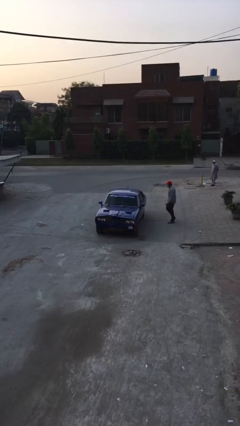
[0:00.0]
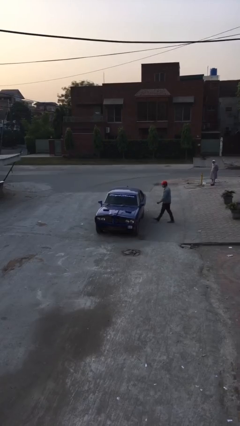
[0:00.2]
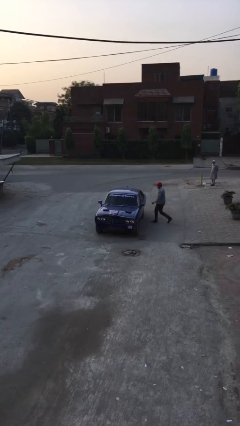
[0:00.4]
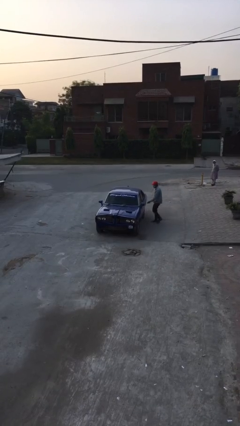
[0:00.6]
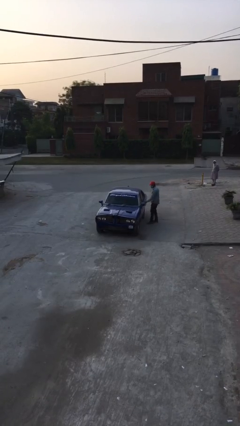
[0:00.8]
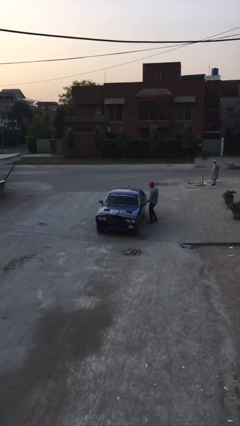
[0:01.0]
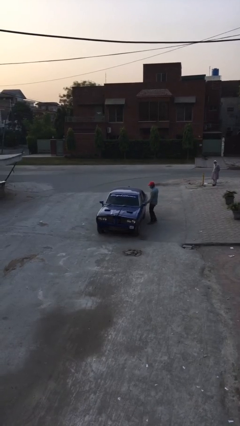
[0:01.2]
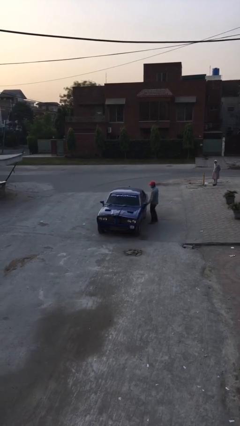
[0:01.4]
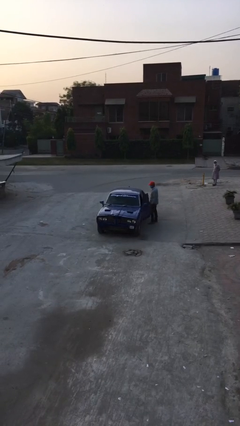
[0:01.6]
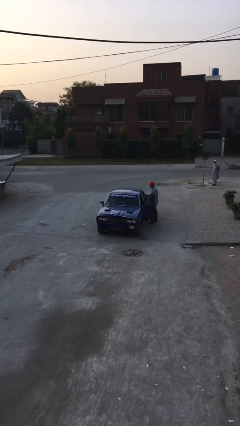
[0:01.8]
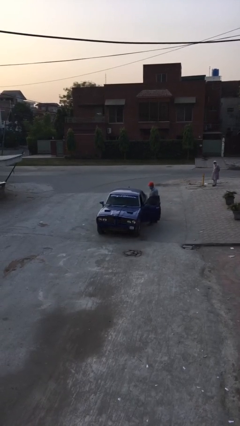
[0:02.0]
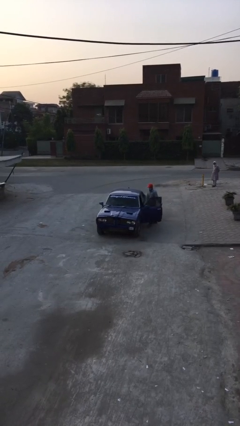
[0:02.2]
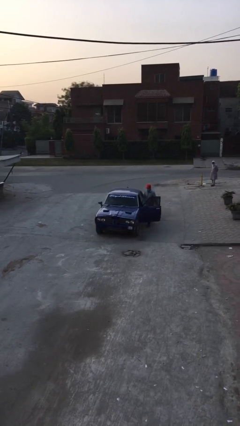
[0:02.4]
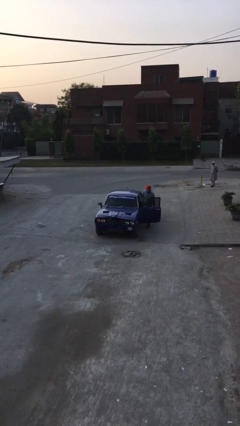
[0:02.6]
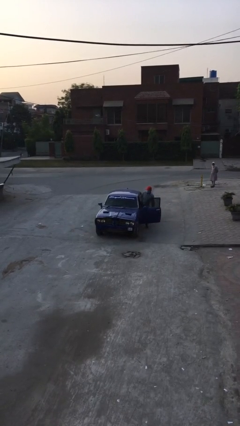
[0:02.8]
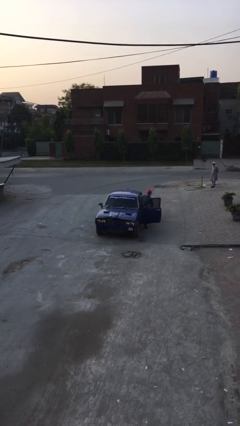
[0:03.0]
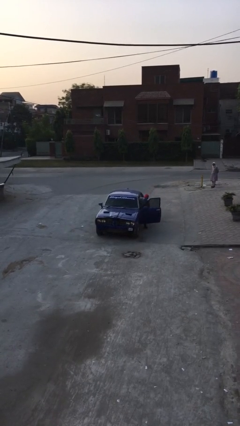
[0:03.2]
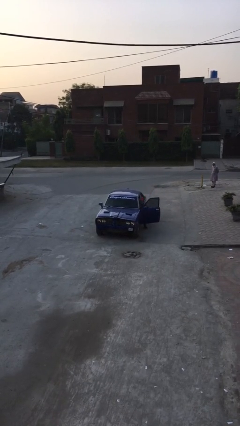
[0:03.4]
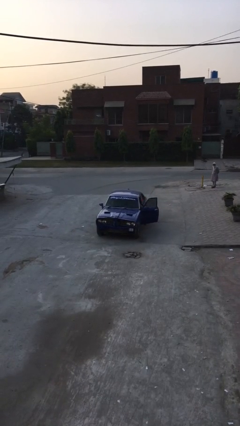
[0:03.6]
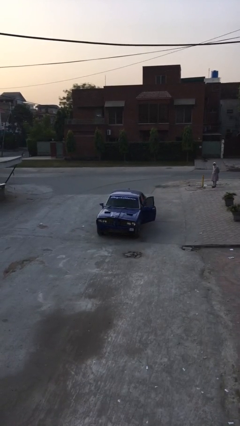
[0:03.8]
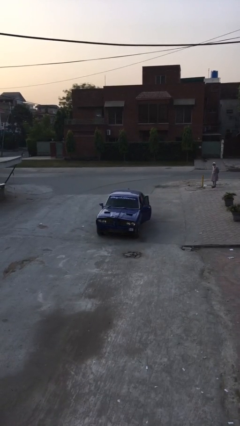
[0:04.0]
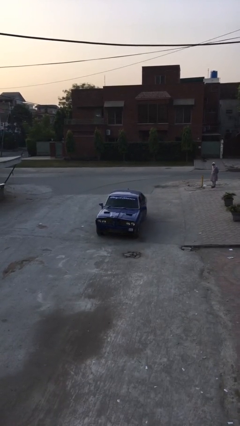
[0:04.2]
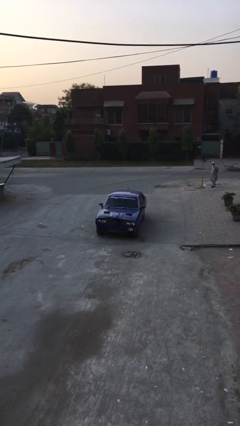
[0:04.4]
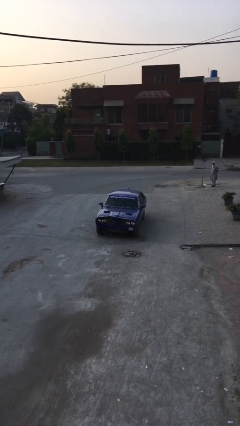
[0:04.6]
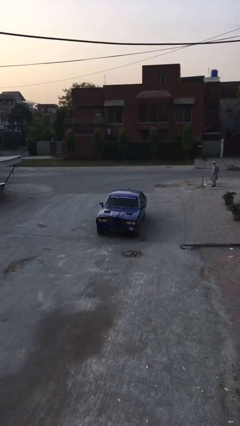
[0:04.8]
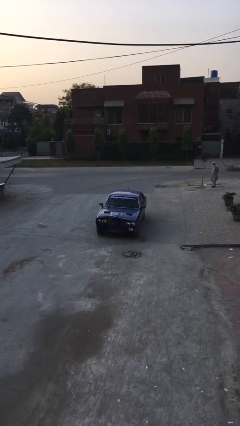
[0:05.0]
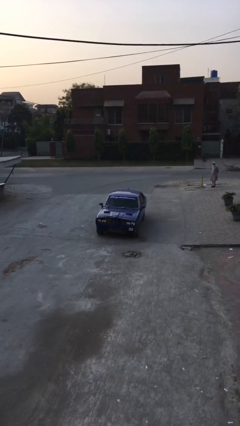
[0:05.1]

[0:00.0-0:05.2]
car picks up person

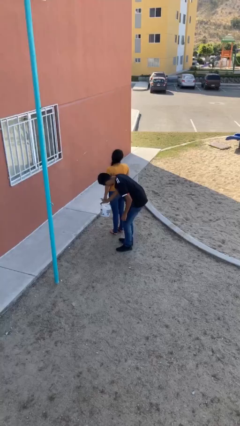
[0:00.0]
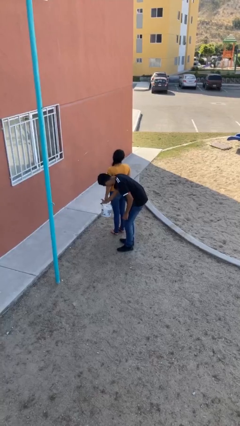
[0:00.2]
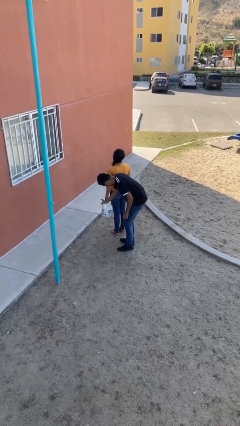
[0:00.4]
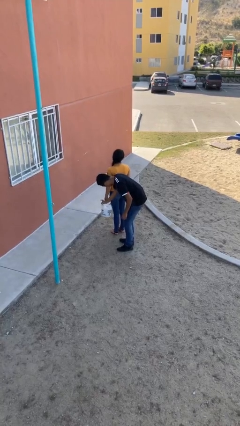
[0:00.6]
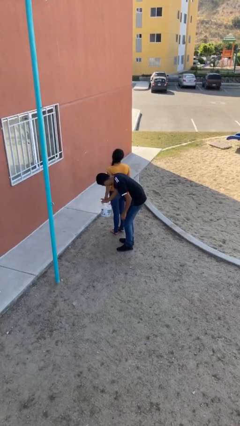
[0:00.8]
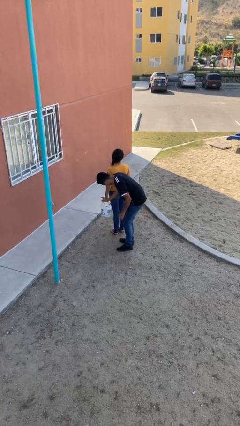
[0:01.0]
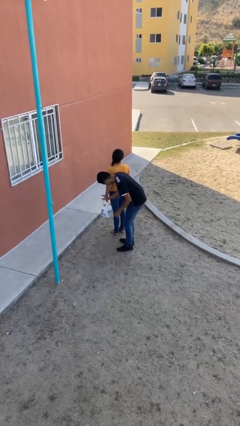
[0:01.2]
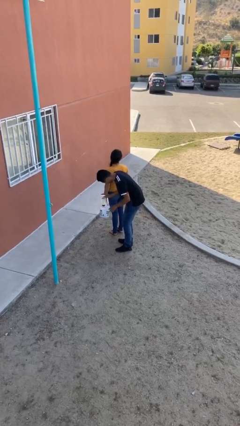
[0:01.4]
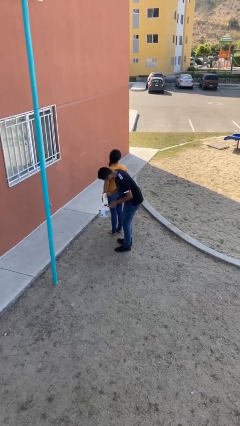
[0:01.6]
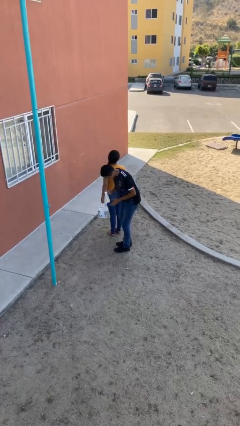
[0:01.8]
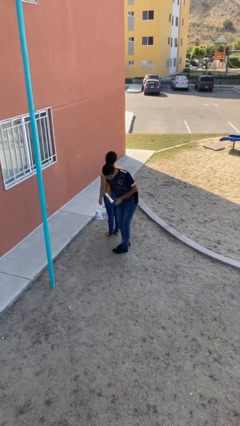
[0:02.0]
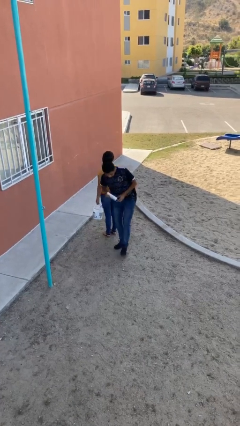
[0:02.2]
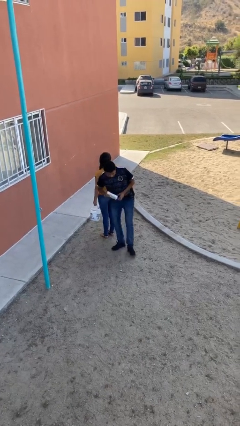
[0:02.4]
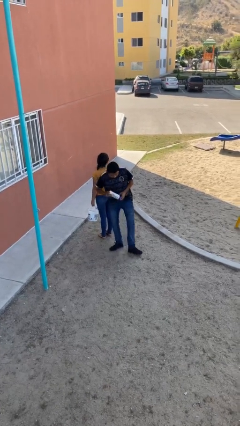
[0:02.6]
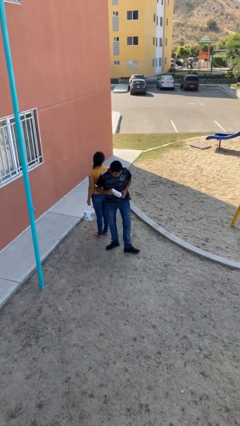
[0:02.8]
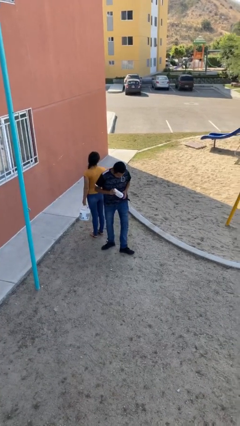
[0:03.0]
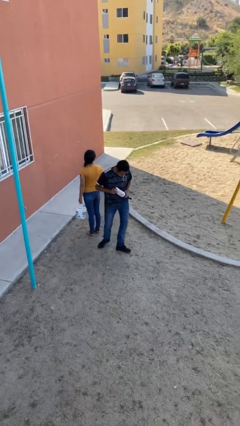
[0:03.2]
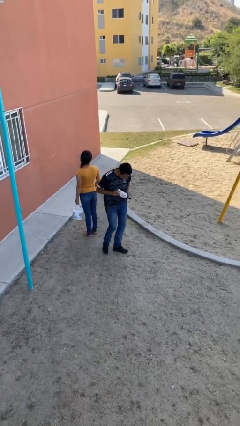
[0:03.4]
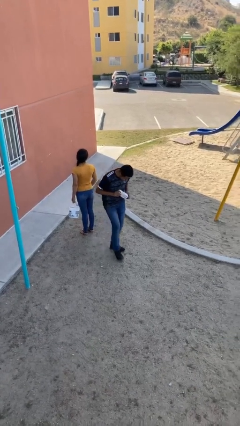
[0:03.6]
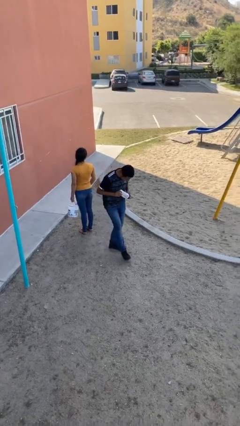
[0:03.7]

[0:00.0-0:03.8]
person steals object from person

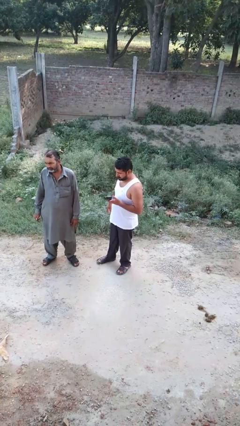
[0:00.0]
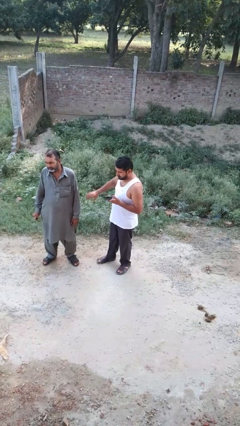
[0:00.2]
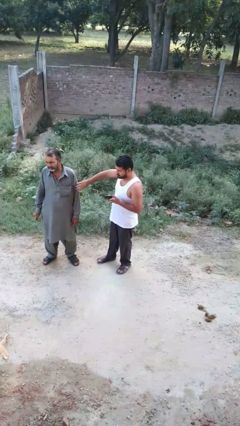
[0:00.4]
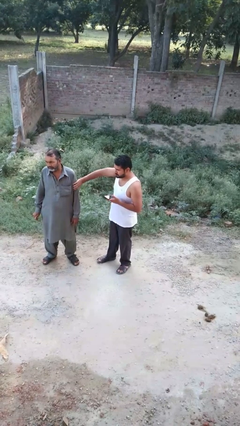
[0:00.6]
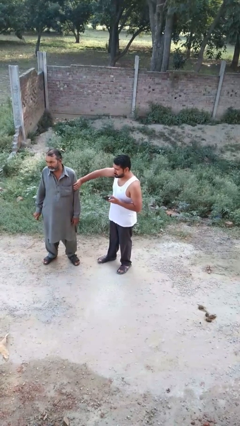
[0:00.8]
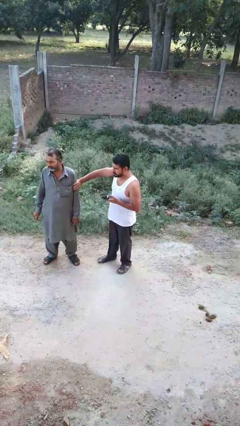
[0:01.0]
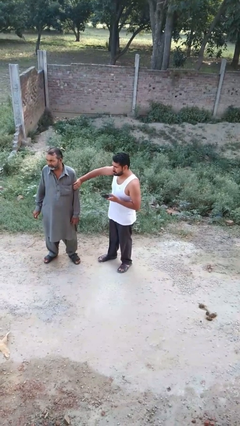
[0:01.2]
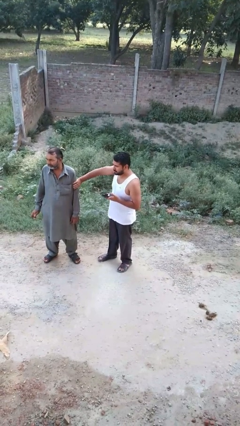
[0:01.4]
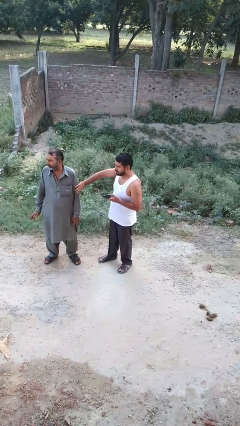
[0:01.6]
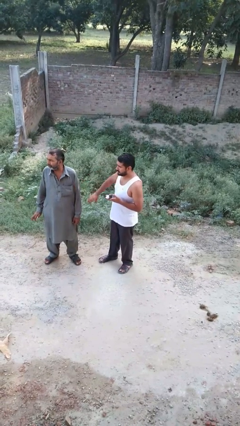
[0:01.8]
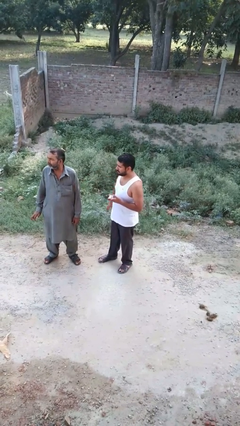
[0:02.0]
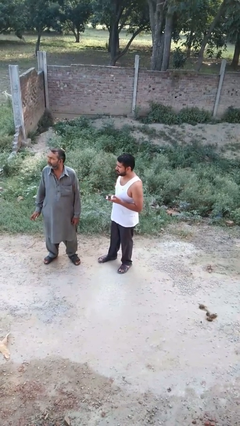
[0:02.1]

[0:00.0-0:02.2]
person grabs person by bicep

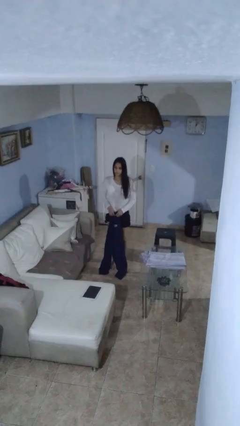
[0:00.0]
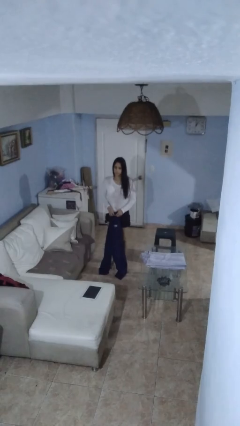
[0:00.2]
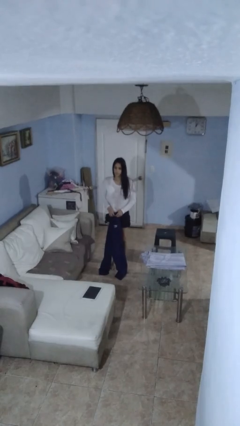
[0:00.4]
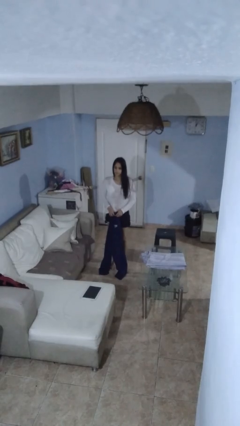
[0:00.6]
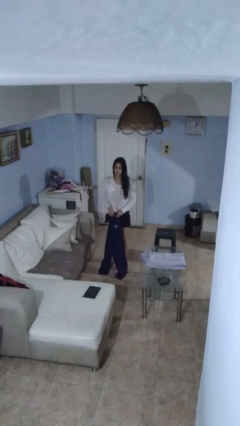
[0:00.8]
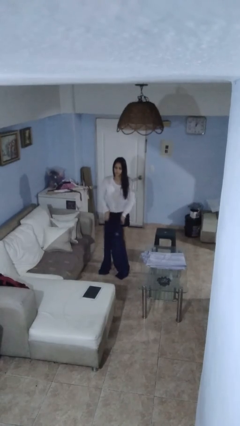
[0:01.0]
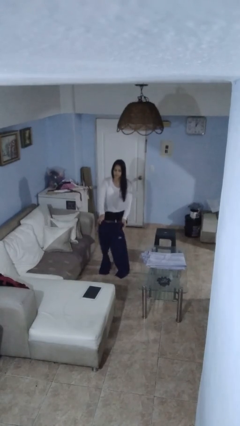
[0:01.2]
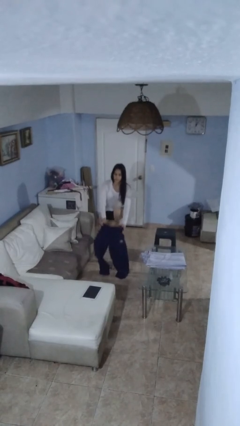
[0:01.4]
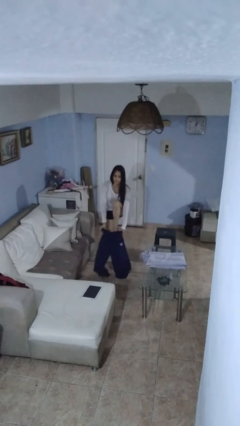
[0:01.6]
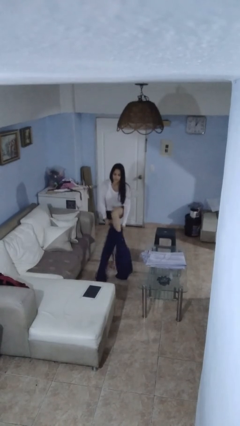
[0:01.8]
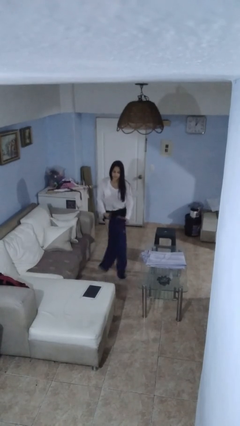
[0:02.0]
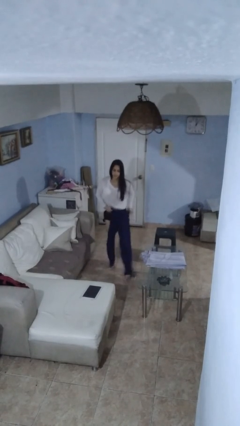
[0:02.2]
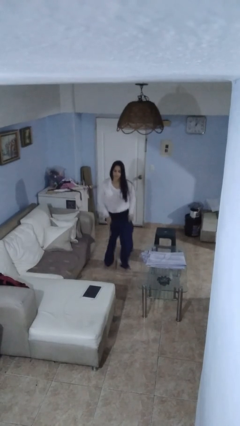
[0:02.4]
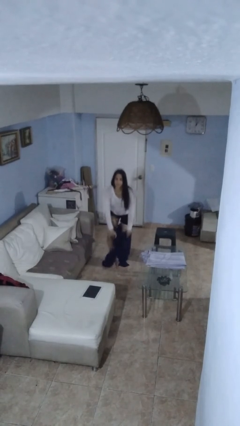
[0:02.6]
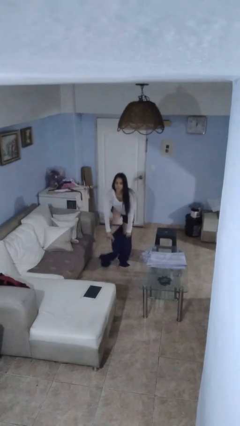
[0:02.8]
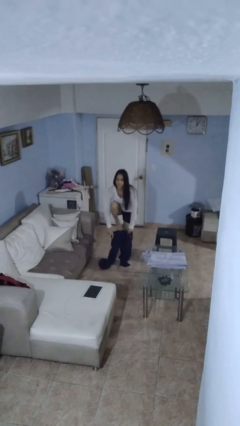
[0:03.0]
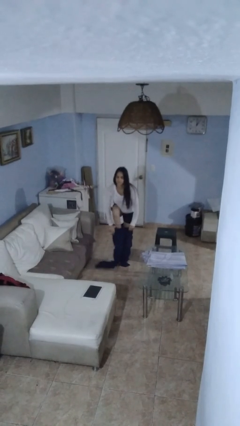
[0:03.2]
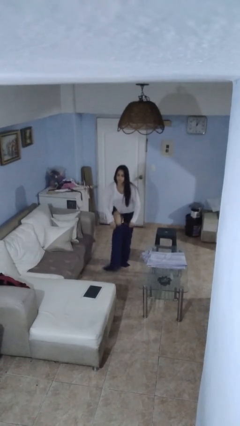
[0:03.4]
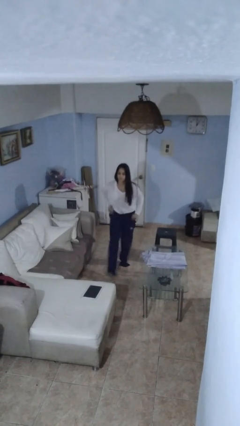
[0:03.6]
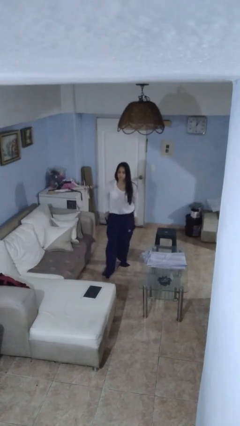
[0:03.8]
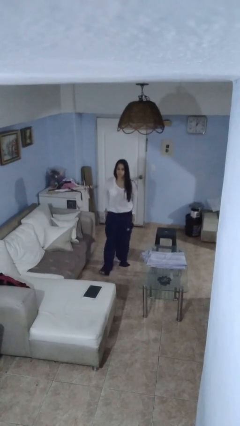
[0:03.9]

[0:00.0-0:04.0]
person puts on pants

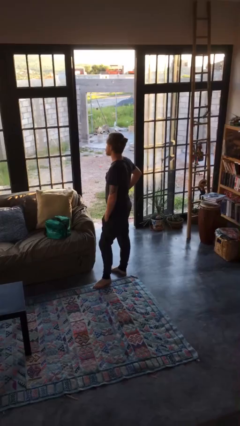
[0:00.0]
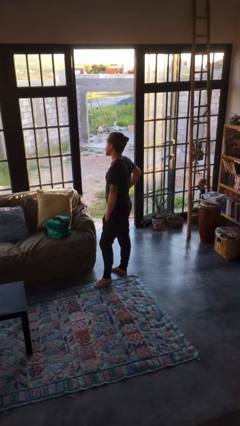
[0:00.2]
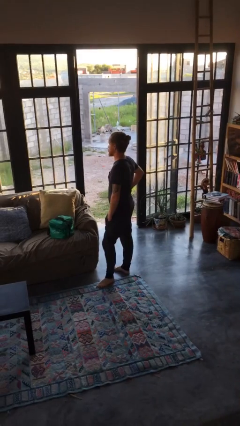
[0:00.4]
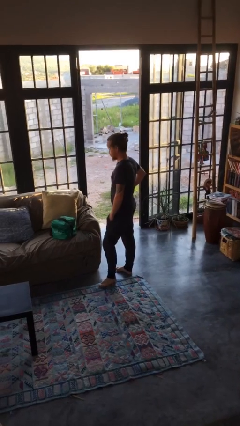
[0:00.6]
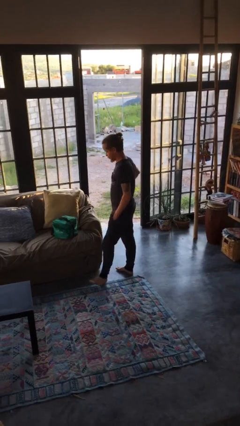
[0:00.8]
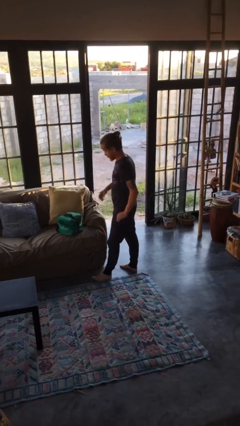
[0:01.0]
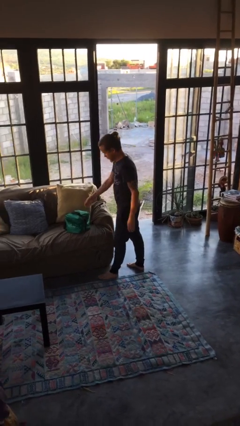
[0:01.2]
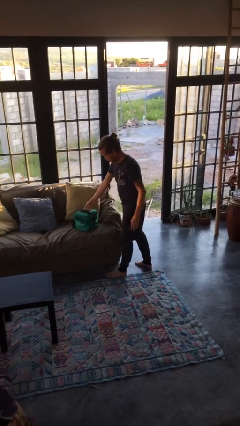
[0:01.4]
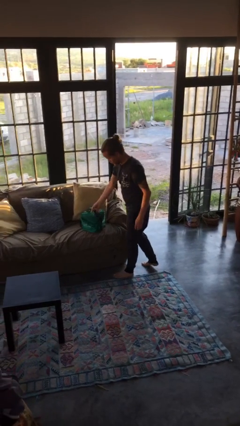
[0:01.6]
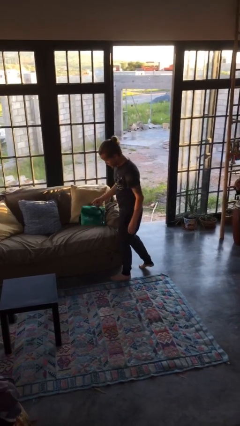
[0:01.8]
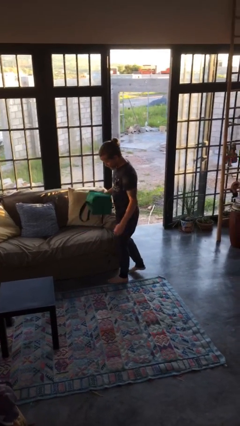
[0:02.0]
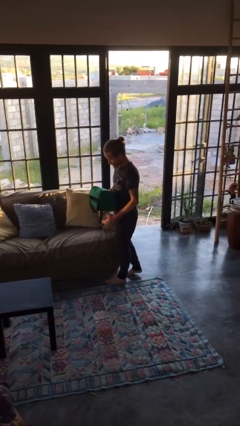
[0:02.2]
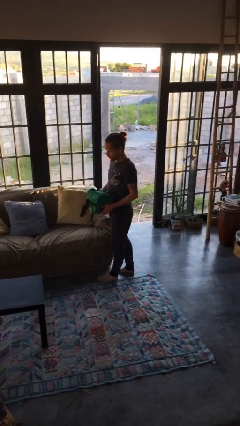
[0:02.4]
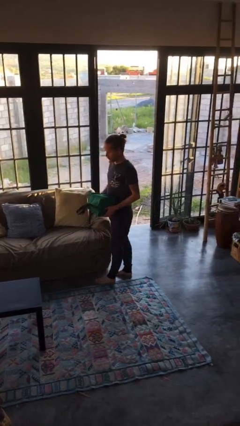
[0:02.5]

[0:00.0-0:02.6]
person picks up object from couch

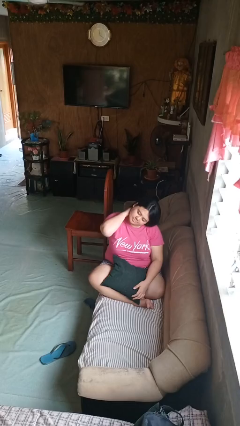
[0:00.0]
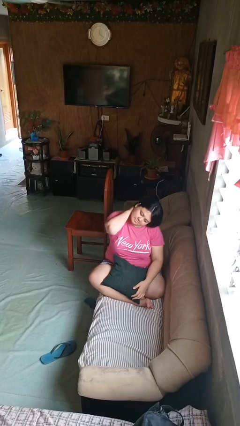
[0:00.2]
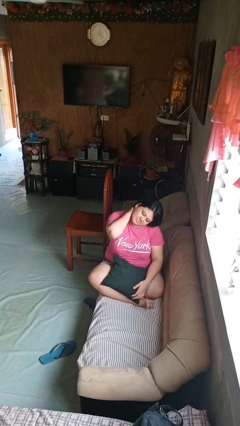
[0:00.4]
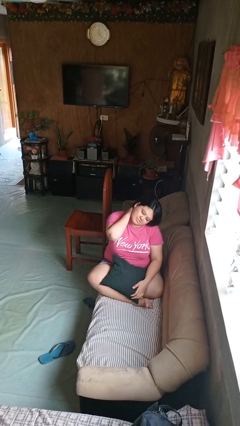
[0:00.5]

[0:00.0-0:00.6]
person rubs neck
